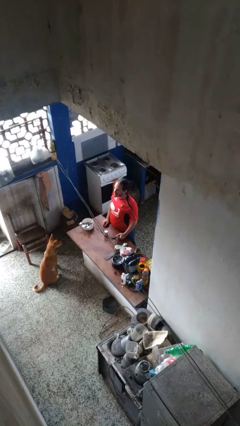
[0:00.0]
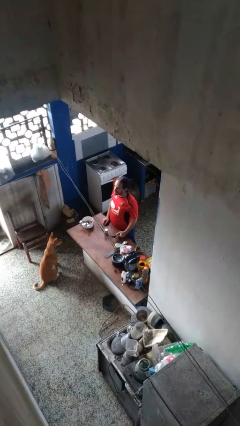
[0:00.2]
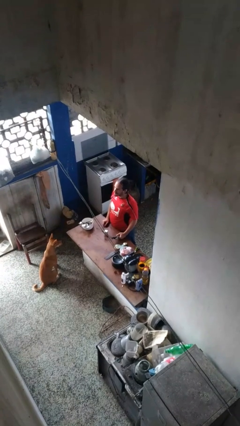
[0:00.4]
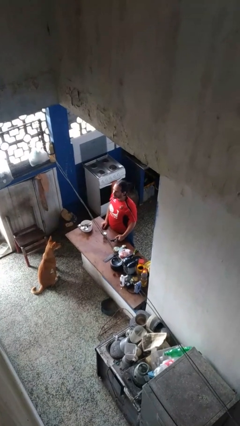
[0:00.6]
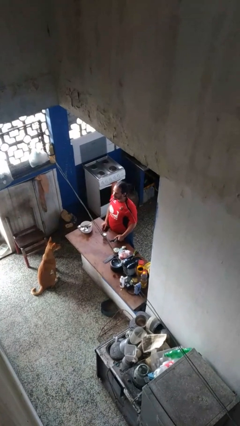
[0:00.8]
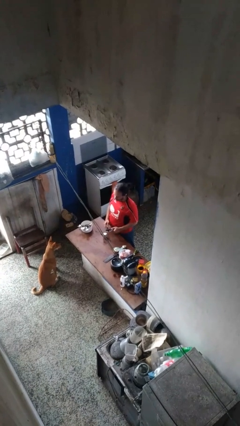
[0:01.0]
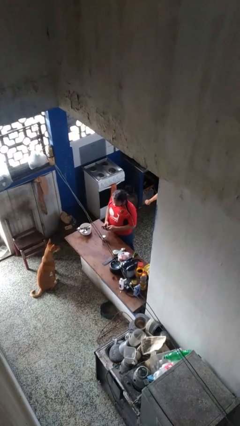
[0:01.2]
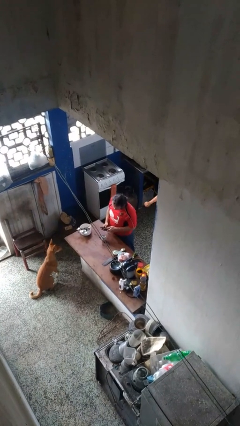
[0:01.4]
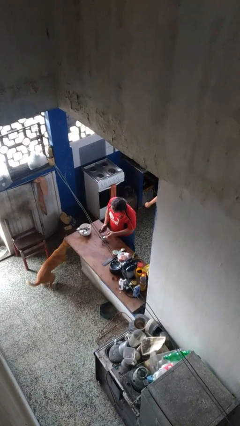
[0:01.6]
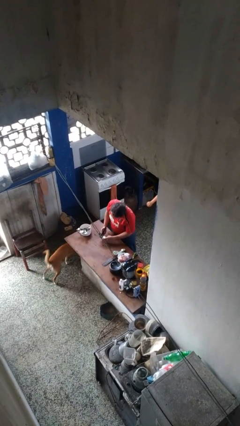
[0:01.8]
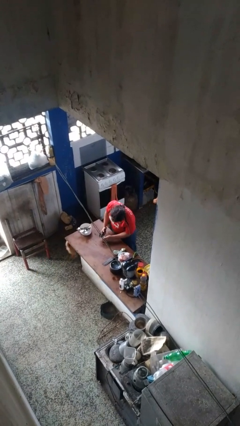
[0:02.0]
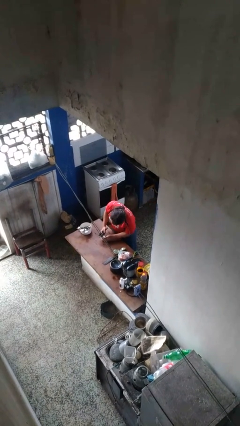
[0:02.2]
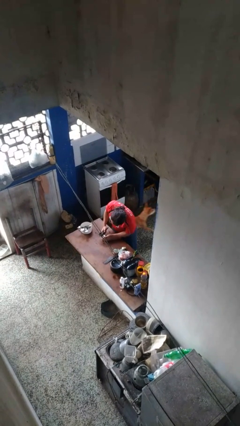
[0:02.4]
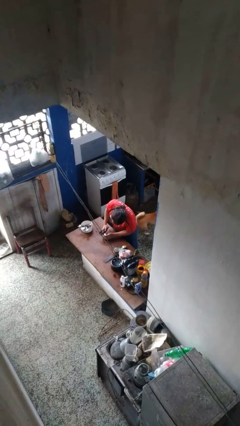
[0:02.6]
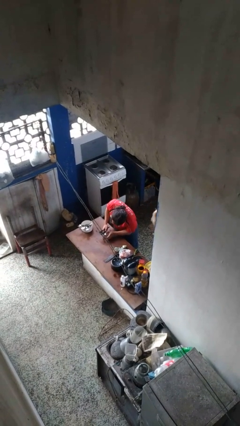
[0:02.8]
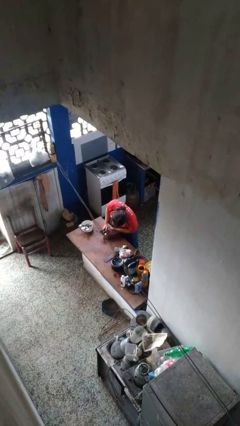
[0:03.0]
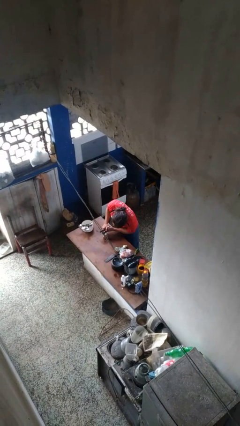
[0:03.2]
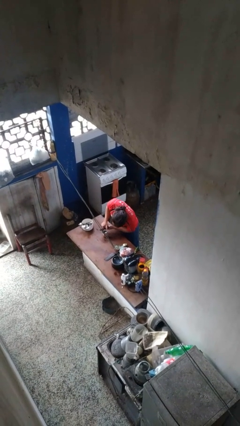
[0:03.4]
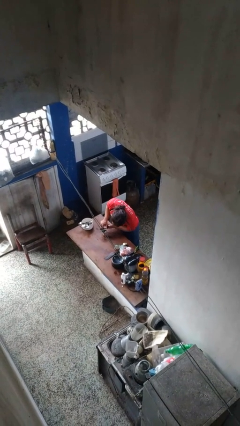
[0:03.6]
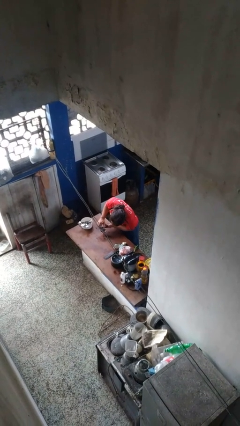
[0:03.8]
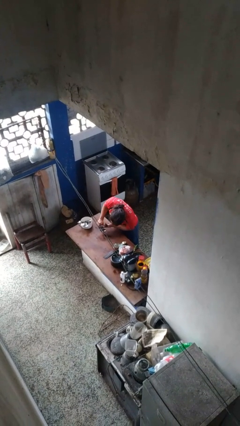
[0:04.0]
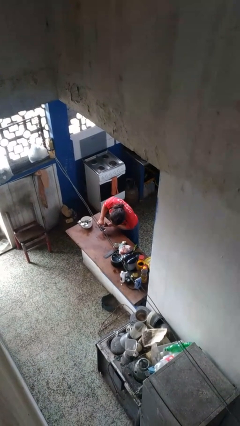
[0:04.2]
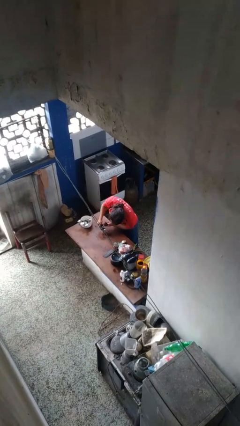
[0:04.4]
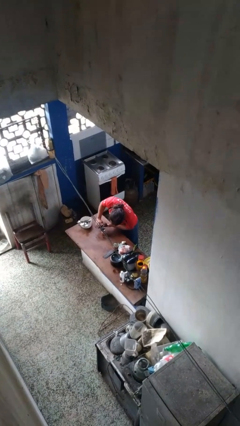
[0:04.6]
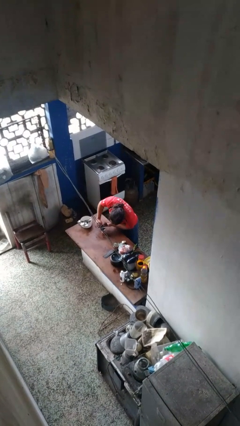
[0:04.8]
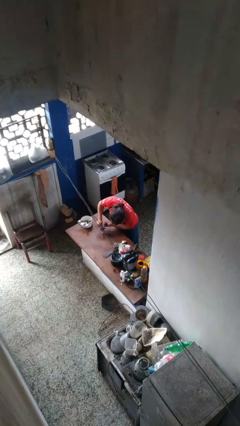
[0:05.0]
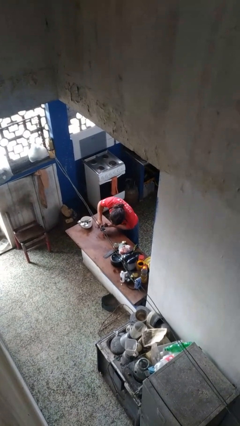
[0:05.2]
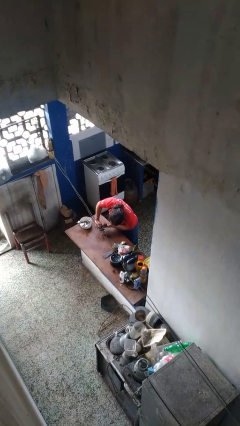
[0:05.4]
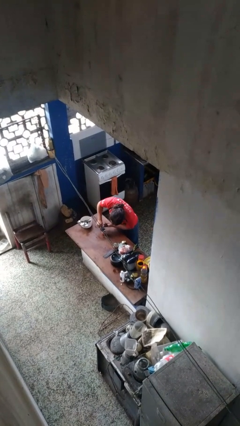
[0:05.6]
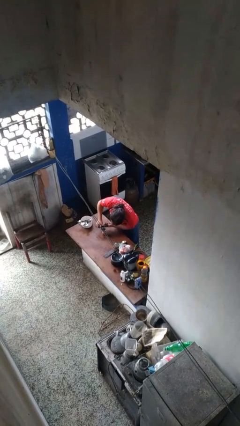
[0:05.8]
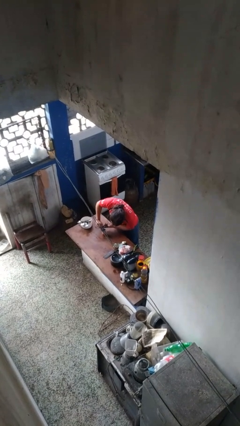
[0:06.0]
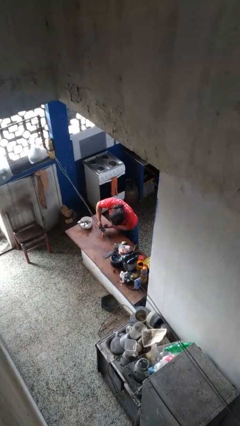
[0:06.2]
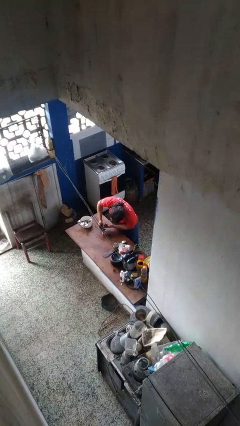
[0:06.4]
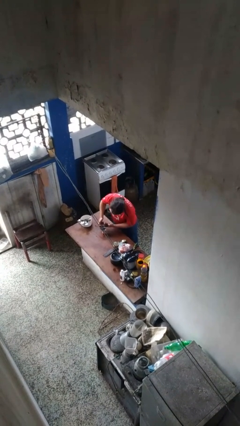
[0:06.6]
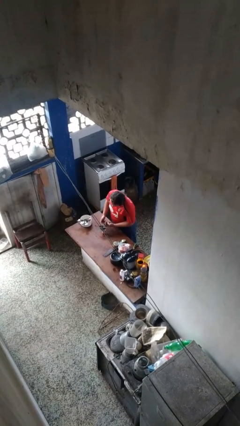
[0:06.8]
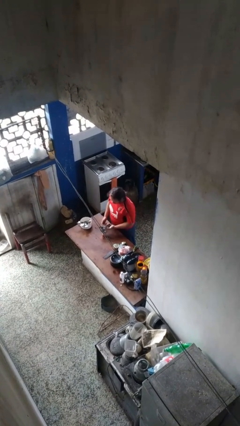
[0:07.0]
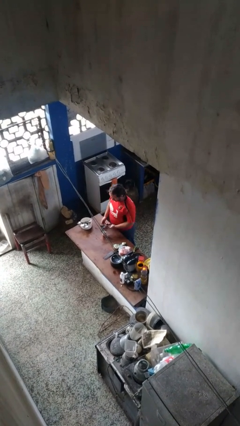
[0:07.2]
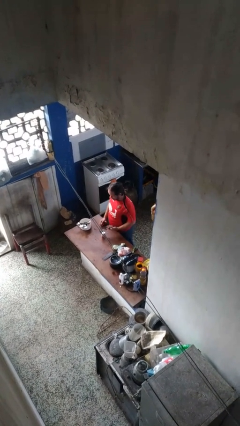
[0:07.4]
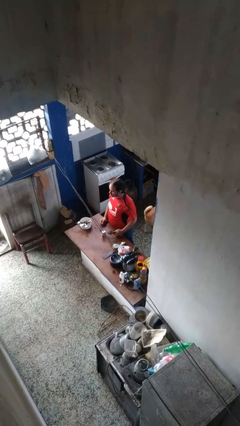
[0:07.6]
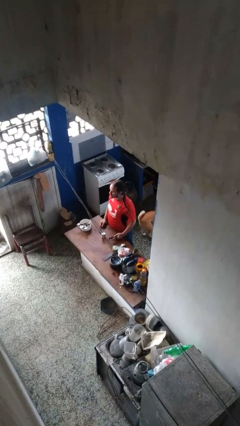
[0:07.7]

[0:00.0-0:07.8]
person opens can with can opener

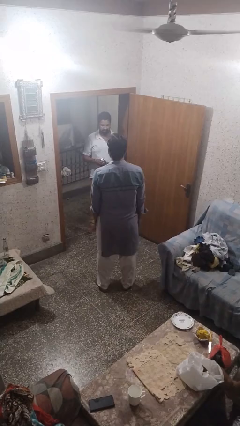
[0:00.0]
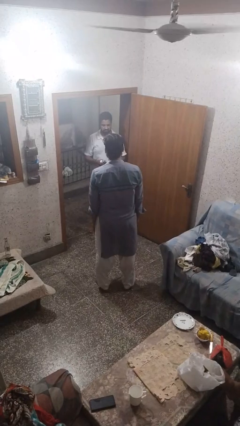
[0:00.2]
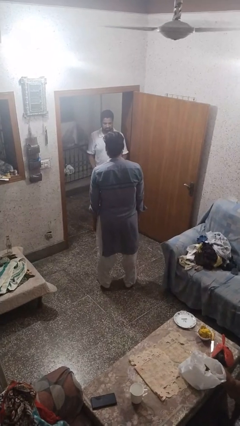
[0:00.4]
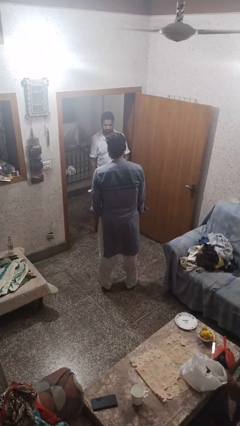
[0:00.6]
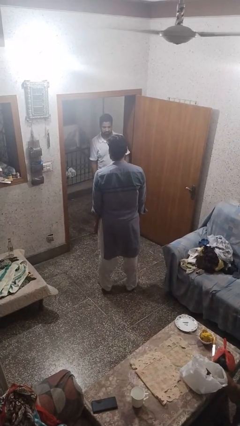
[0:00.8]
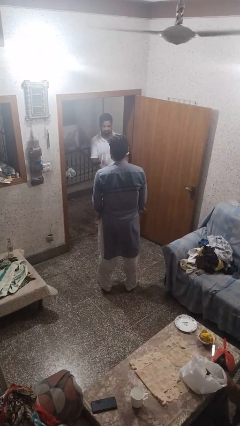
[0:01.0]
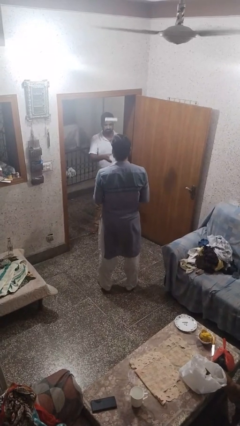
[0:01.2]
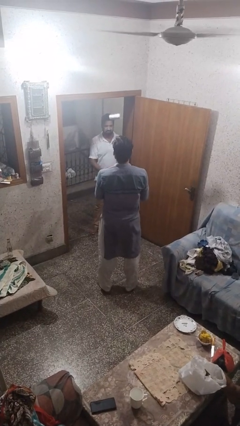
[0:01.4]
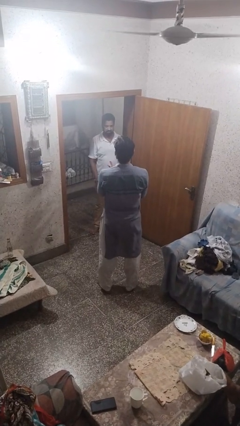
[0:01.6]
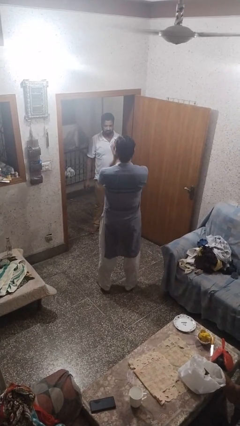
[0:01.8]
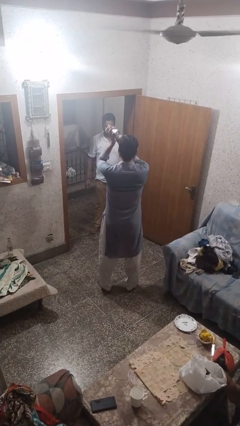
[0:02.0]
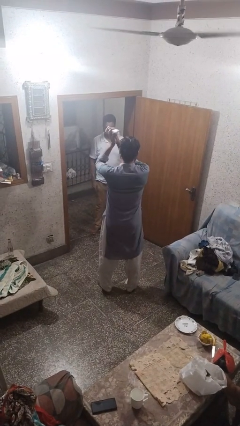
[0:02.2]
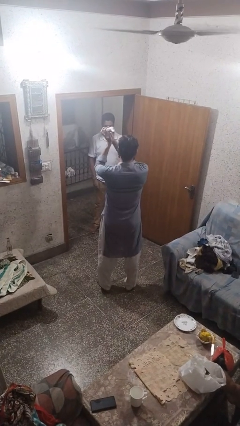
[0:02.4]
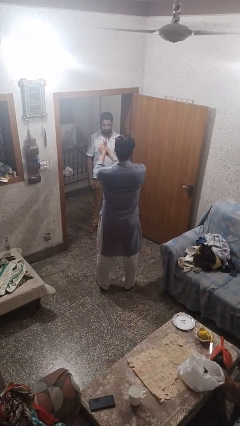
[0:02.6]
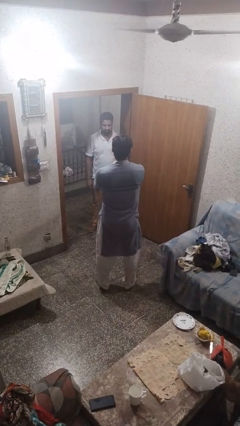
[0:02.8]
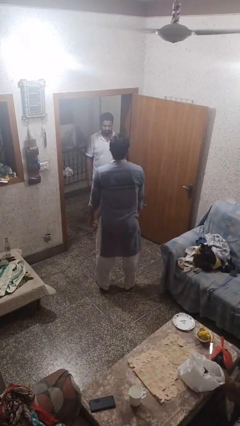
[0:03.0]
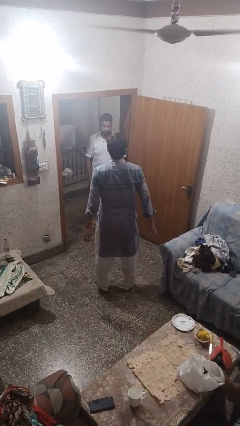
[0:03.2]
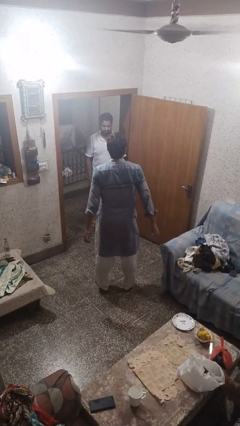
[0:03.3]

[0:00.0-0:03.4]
person catches object from person

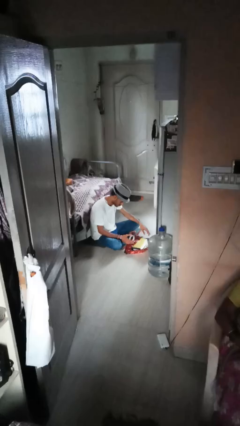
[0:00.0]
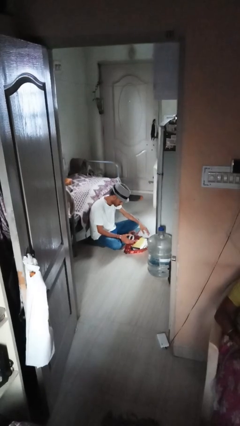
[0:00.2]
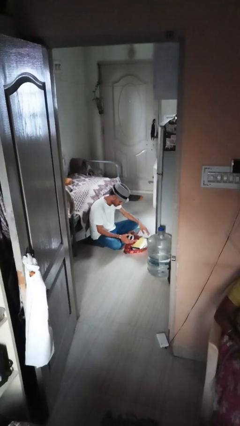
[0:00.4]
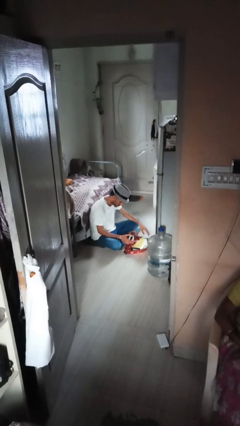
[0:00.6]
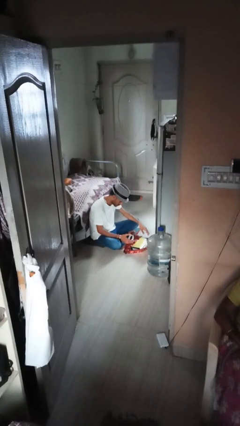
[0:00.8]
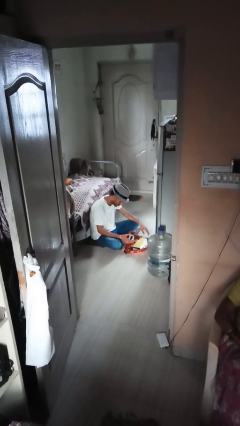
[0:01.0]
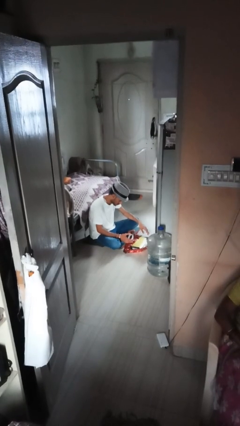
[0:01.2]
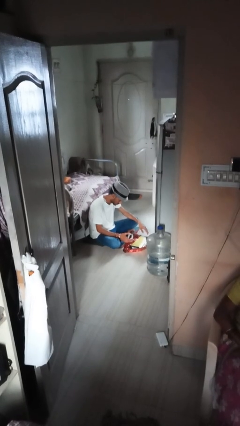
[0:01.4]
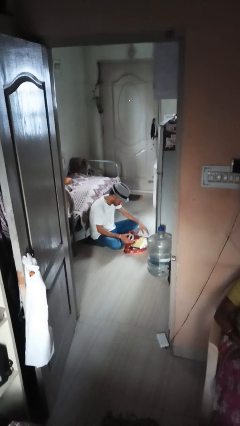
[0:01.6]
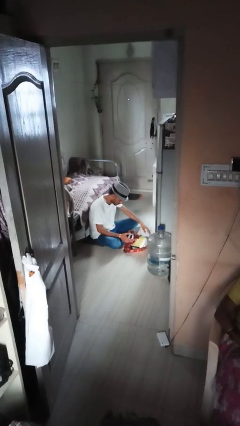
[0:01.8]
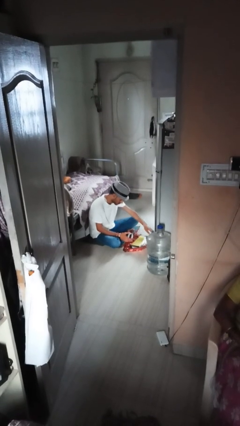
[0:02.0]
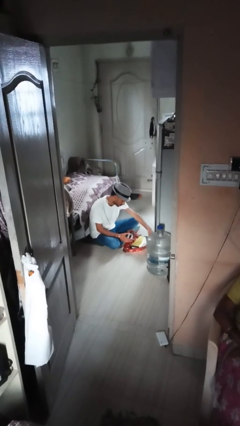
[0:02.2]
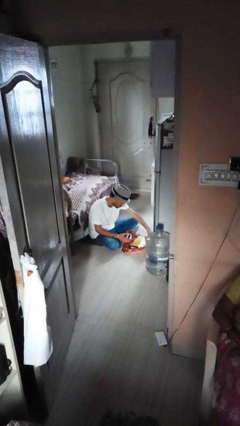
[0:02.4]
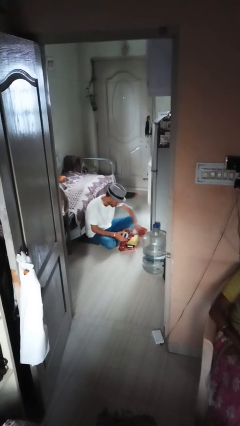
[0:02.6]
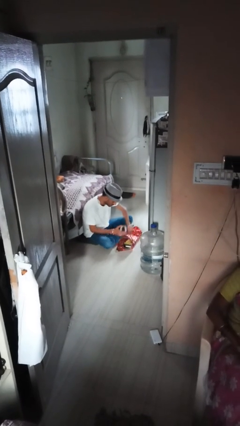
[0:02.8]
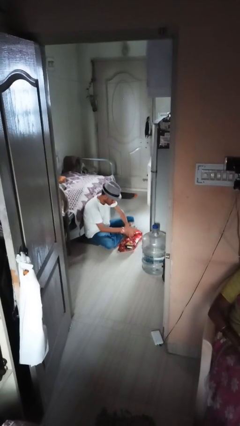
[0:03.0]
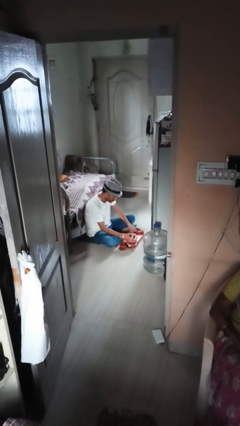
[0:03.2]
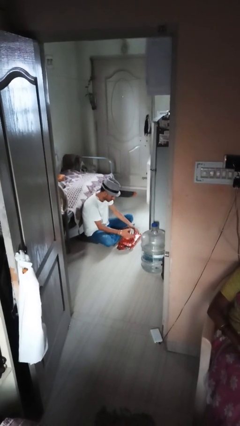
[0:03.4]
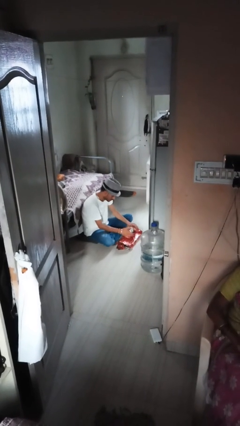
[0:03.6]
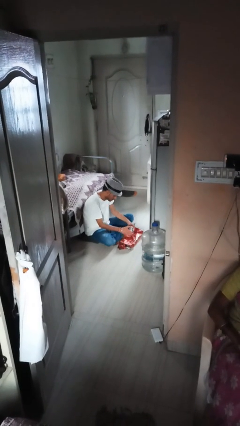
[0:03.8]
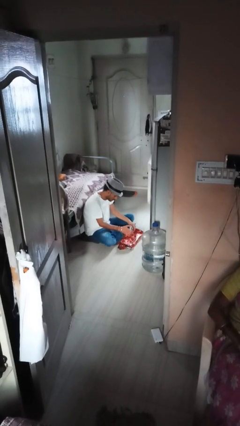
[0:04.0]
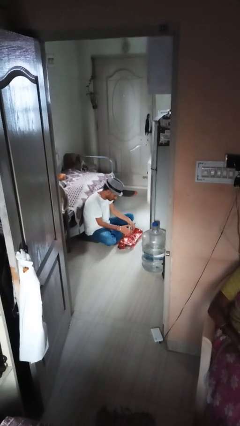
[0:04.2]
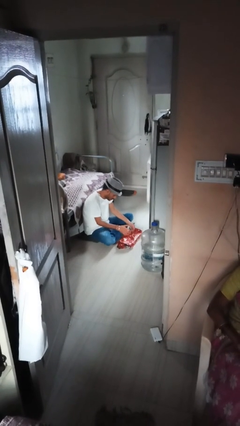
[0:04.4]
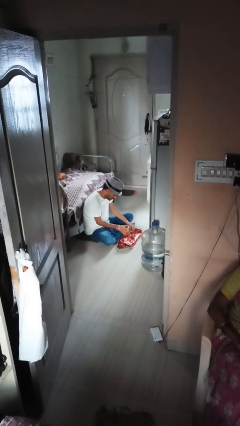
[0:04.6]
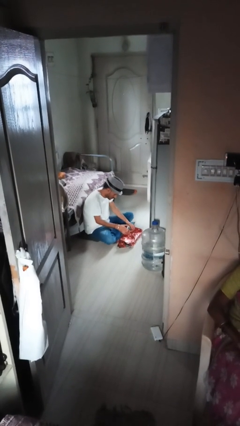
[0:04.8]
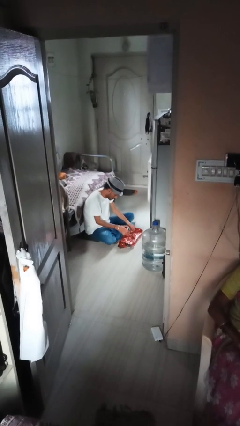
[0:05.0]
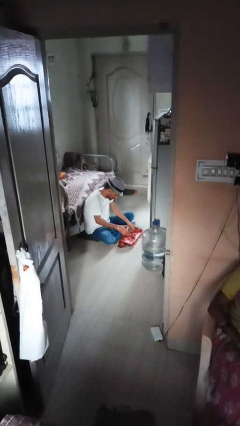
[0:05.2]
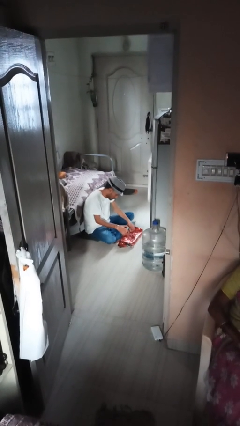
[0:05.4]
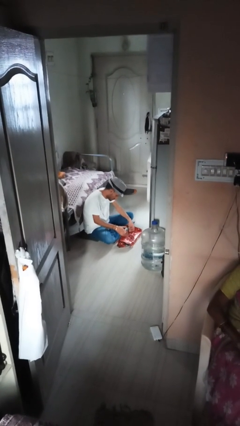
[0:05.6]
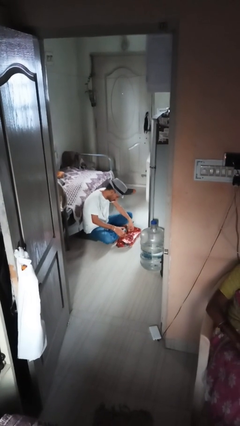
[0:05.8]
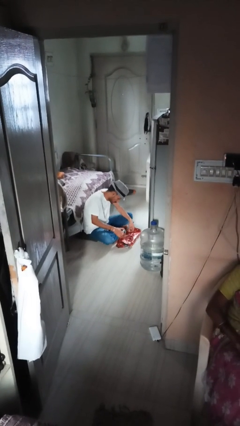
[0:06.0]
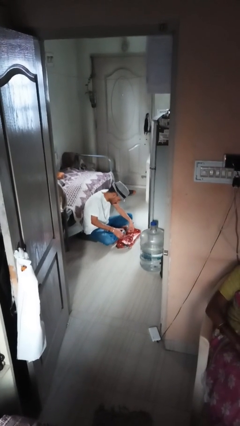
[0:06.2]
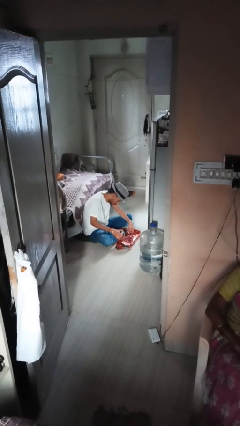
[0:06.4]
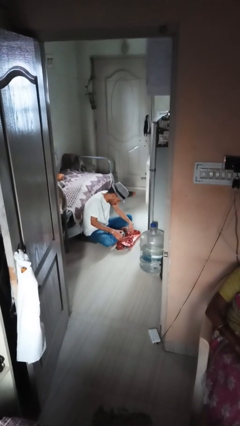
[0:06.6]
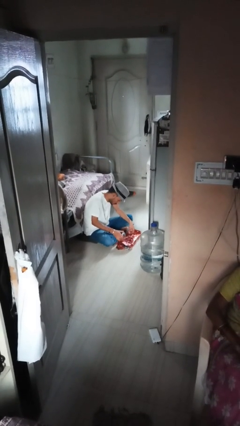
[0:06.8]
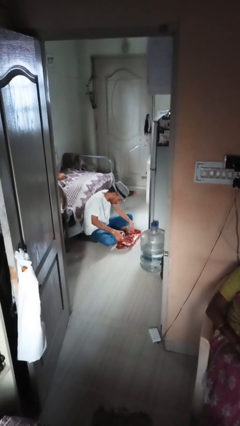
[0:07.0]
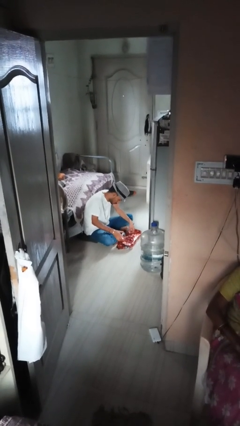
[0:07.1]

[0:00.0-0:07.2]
person wraps box
